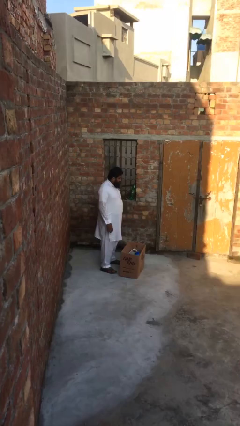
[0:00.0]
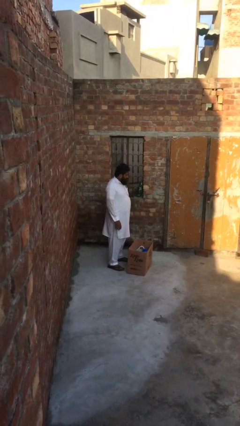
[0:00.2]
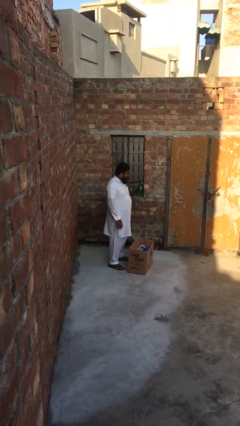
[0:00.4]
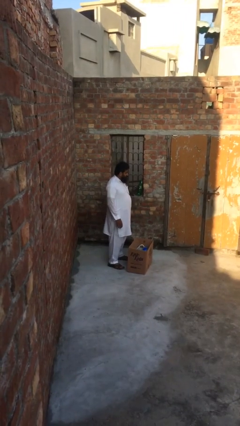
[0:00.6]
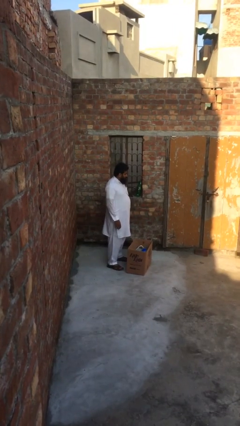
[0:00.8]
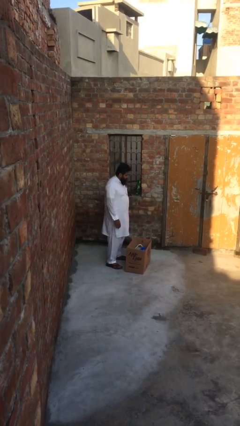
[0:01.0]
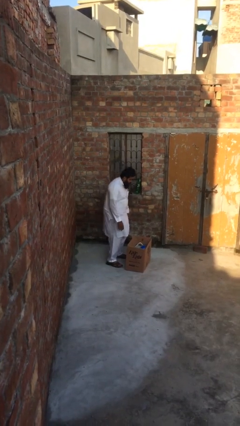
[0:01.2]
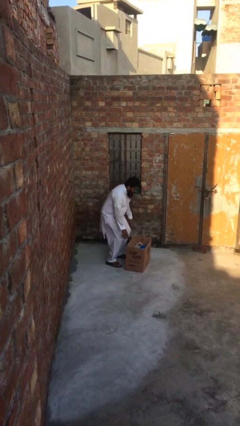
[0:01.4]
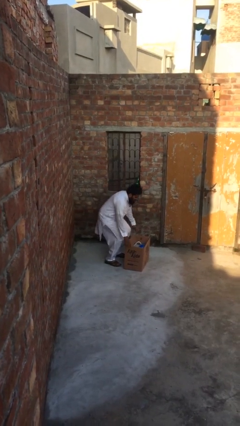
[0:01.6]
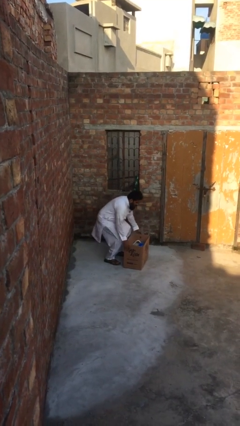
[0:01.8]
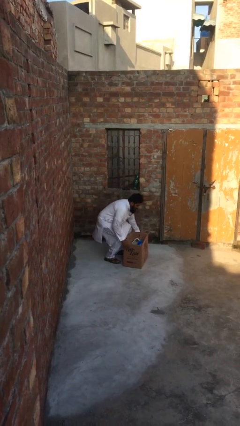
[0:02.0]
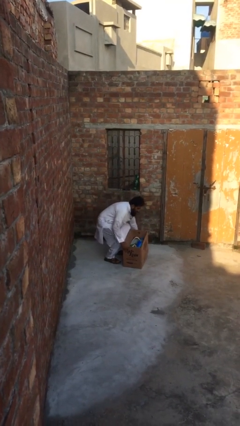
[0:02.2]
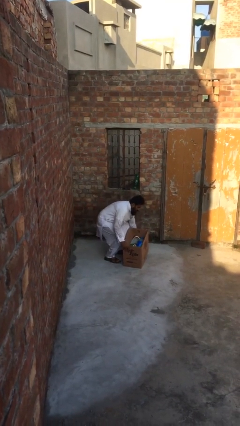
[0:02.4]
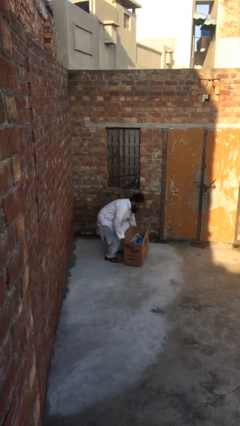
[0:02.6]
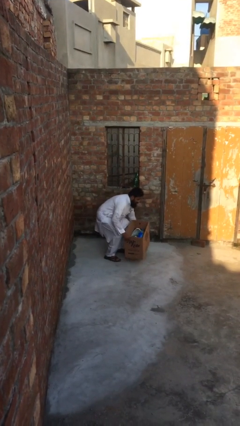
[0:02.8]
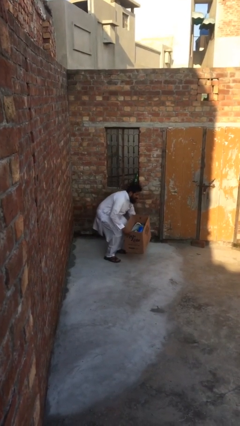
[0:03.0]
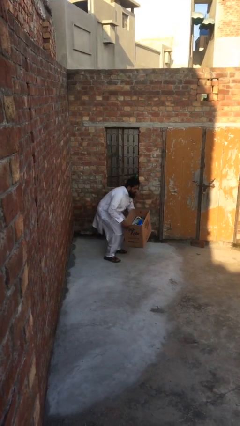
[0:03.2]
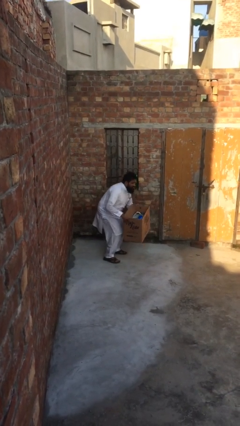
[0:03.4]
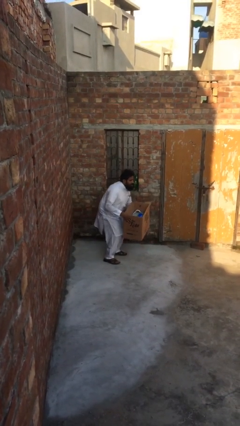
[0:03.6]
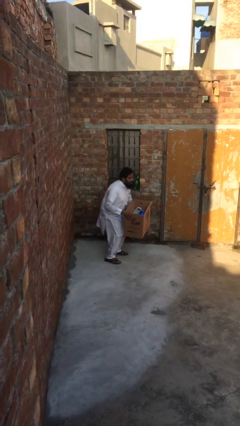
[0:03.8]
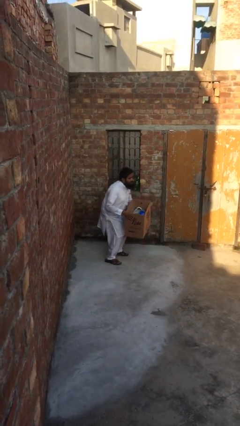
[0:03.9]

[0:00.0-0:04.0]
person picks up object from floor

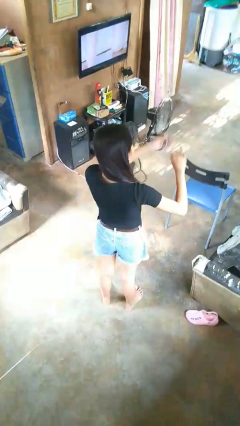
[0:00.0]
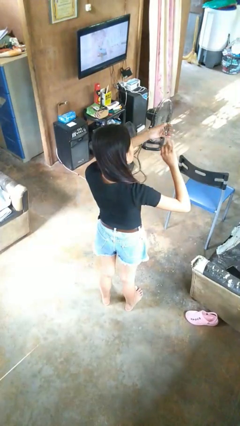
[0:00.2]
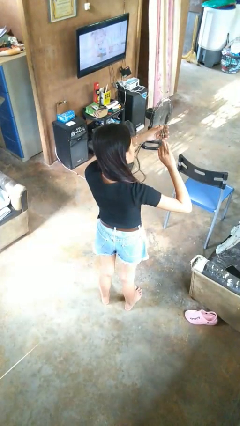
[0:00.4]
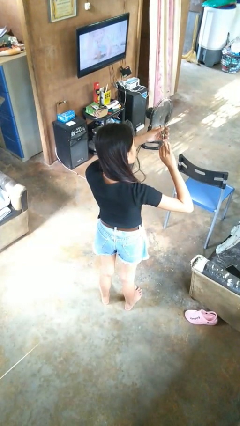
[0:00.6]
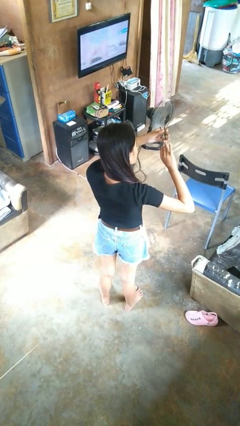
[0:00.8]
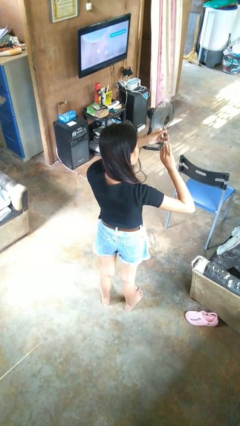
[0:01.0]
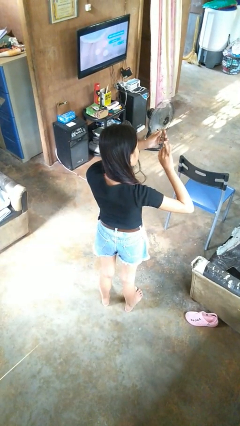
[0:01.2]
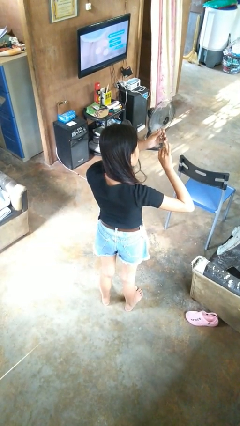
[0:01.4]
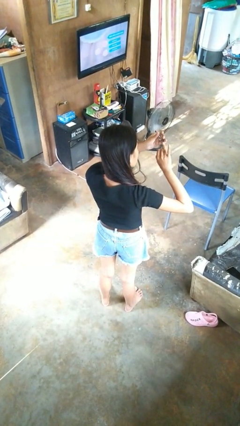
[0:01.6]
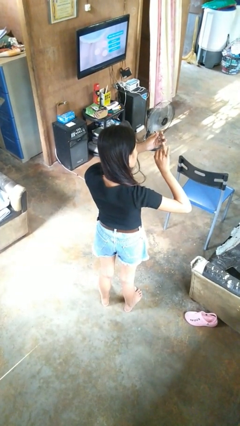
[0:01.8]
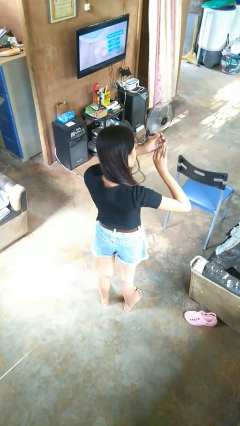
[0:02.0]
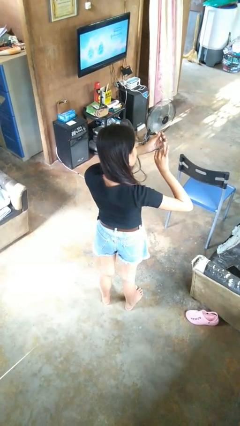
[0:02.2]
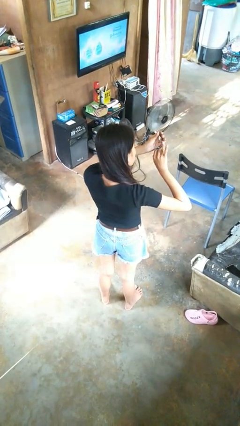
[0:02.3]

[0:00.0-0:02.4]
person clips fingernails

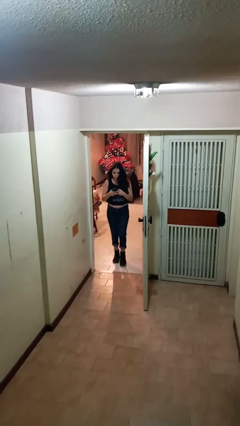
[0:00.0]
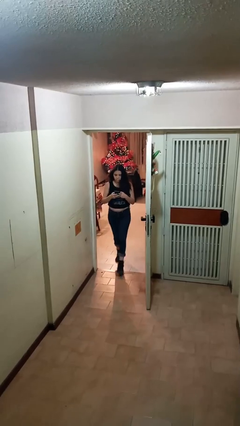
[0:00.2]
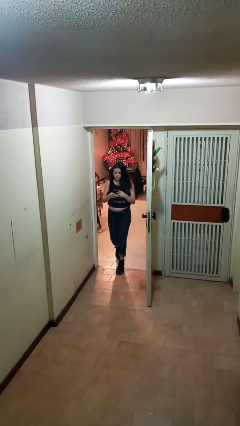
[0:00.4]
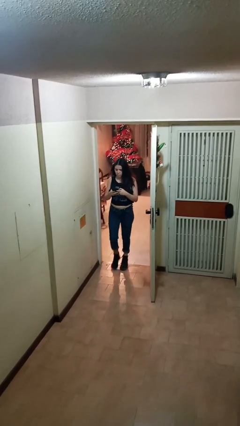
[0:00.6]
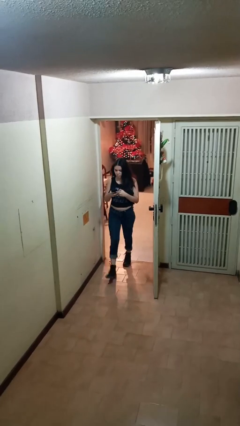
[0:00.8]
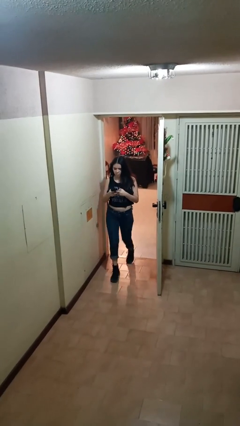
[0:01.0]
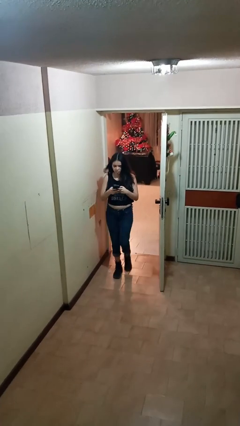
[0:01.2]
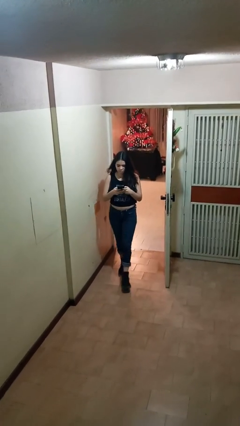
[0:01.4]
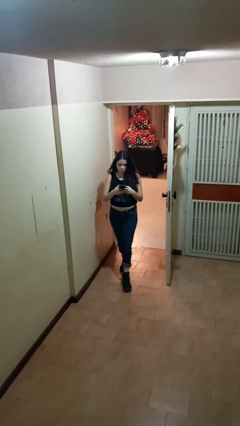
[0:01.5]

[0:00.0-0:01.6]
person enters scene through structure

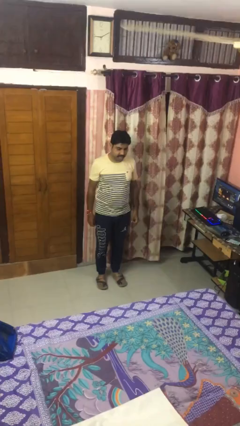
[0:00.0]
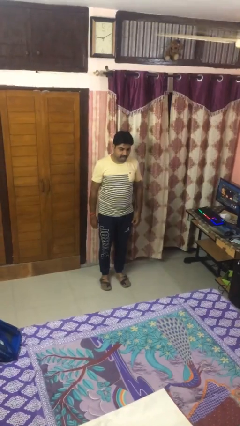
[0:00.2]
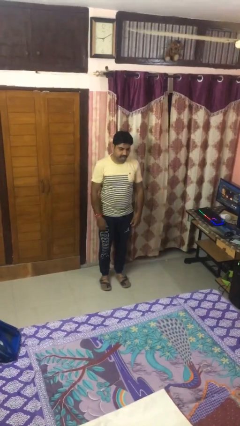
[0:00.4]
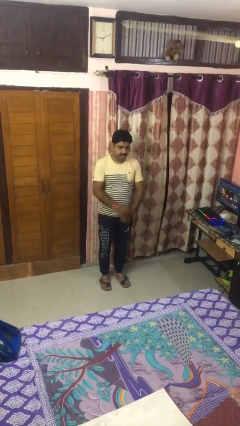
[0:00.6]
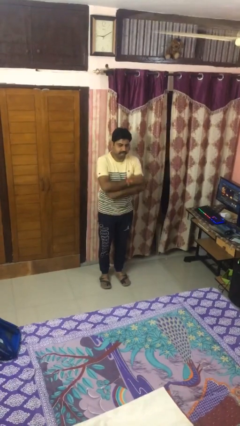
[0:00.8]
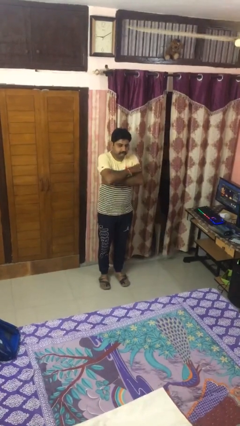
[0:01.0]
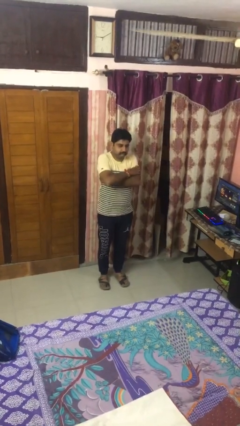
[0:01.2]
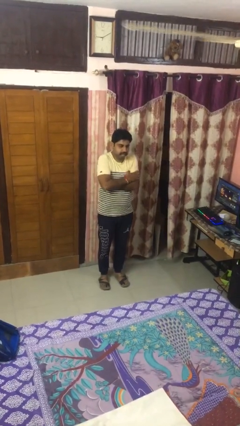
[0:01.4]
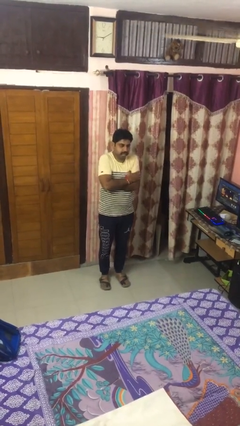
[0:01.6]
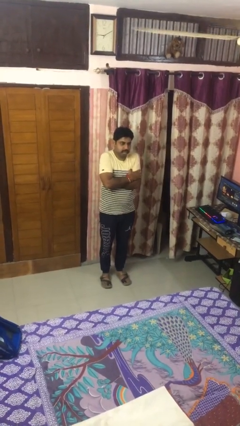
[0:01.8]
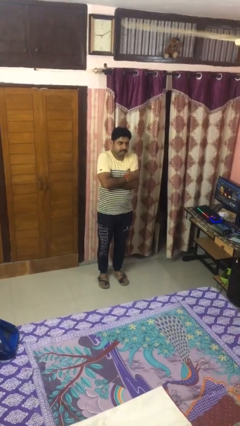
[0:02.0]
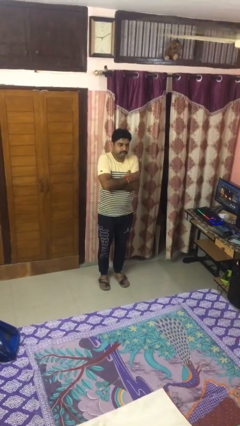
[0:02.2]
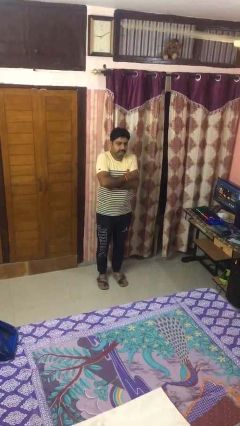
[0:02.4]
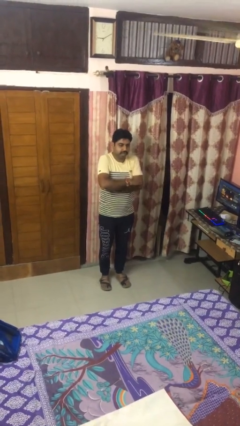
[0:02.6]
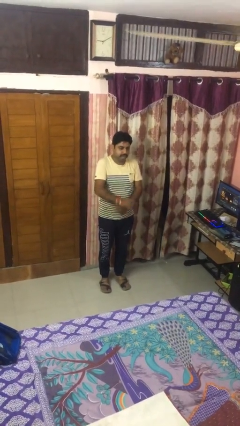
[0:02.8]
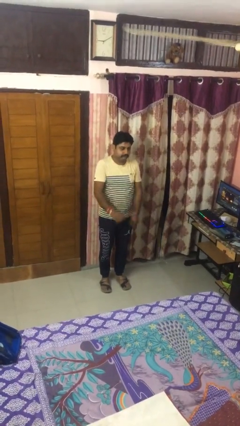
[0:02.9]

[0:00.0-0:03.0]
person crosses arms

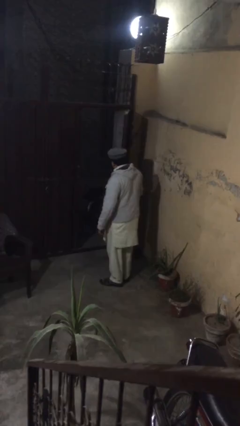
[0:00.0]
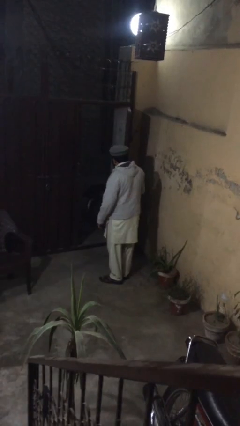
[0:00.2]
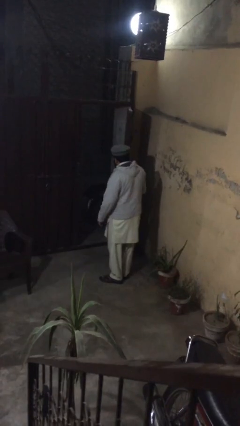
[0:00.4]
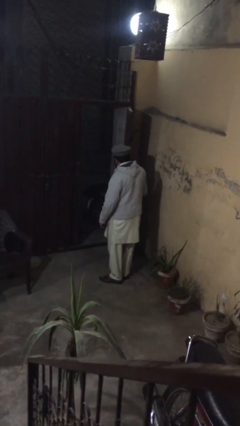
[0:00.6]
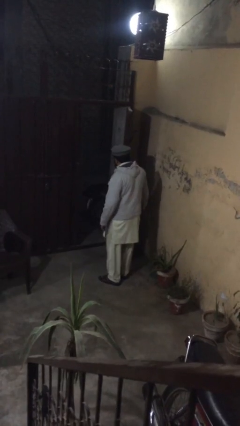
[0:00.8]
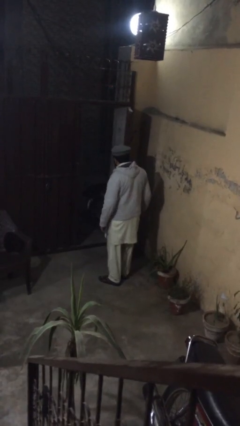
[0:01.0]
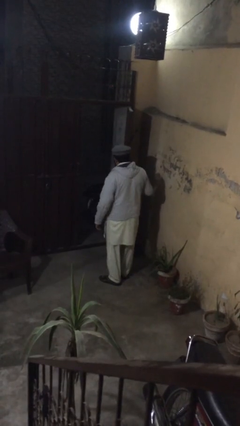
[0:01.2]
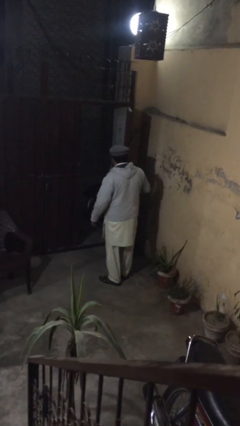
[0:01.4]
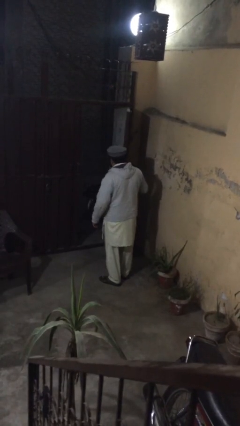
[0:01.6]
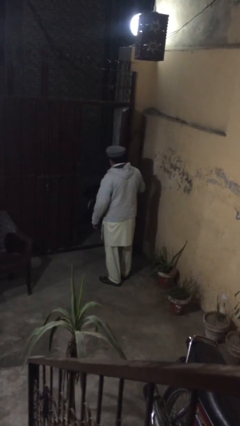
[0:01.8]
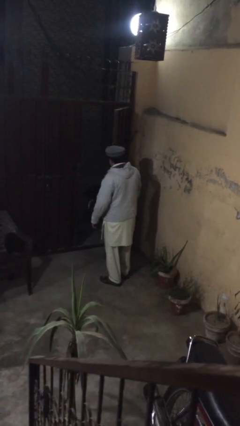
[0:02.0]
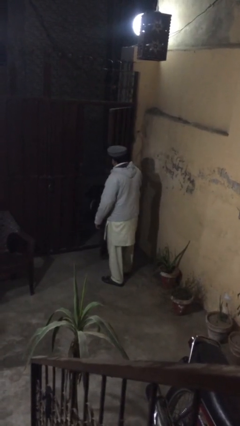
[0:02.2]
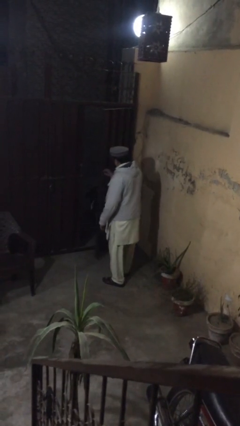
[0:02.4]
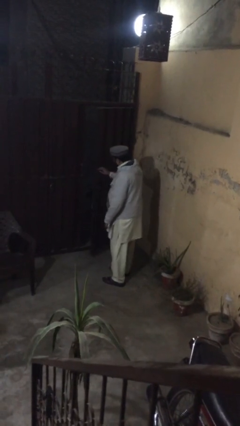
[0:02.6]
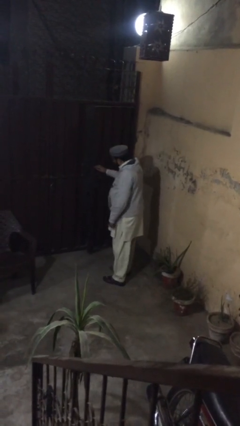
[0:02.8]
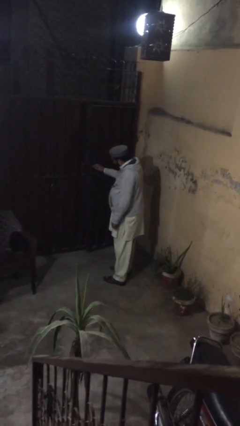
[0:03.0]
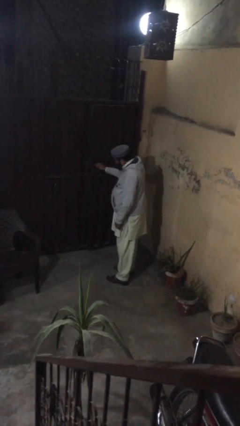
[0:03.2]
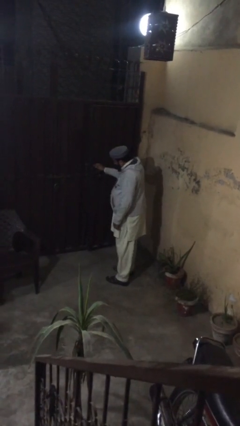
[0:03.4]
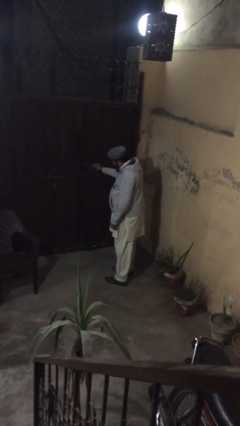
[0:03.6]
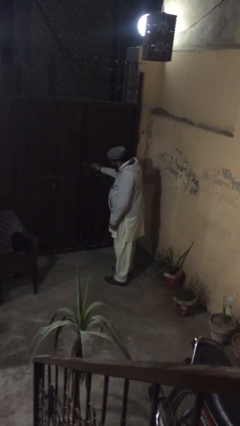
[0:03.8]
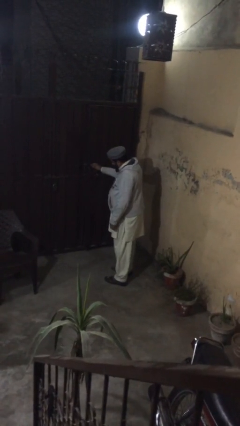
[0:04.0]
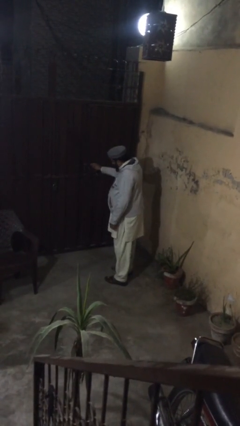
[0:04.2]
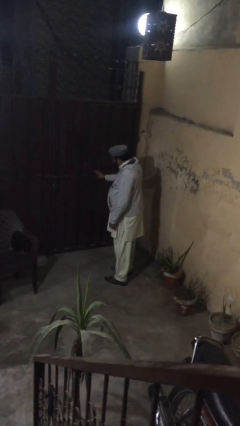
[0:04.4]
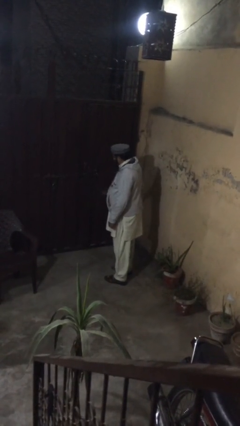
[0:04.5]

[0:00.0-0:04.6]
person closes facility door

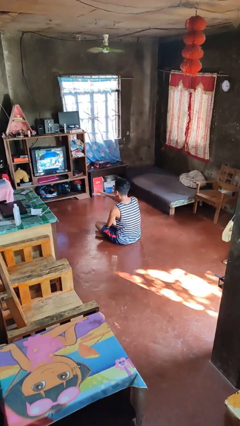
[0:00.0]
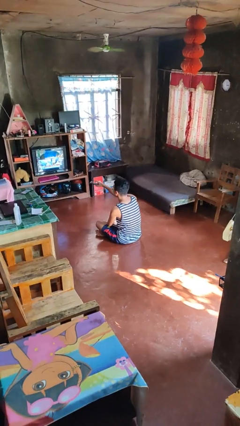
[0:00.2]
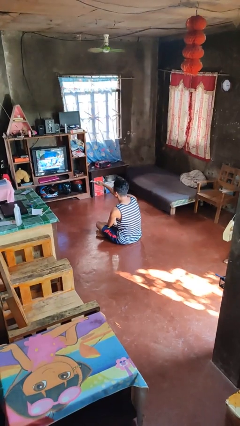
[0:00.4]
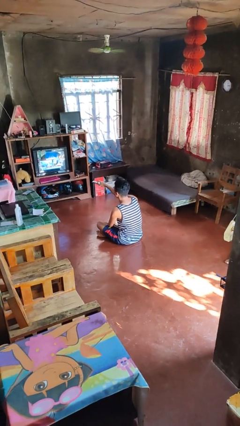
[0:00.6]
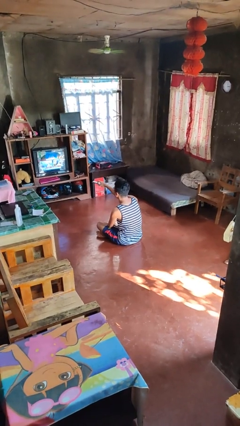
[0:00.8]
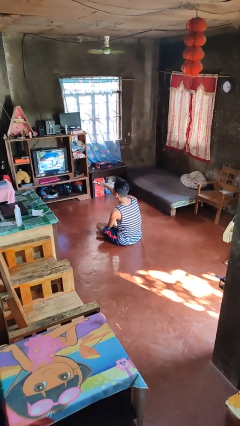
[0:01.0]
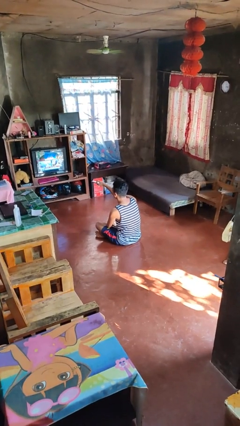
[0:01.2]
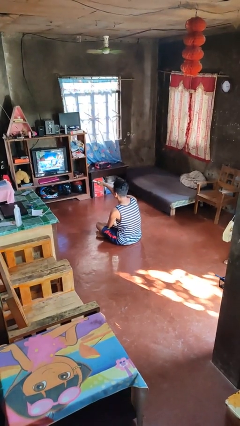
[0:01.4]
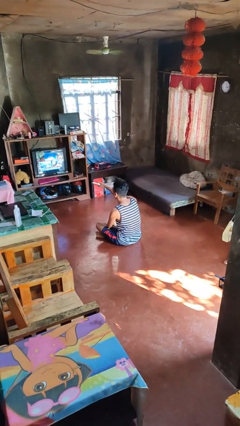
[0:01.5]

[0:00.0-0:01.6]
person uses television remote

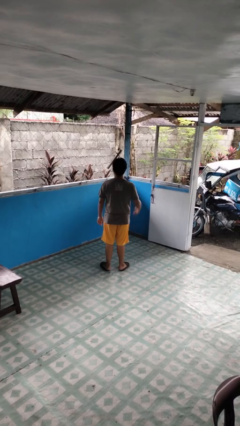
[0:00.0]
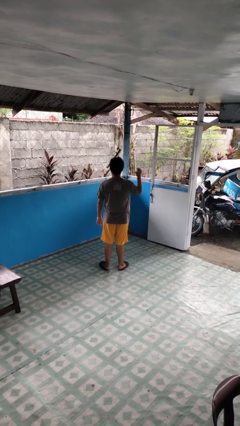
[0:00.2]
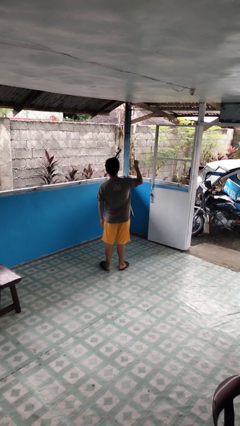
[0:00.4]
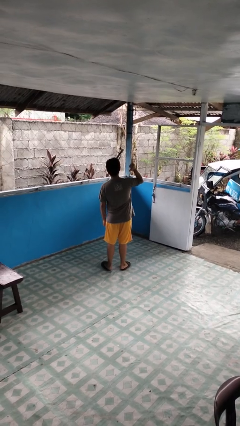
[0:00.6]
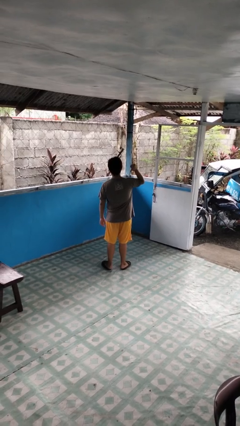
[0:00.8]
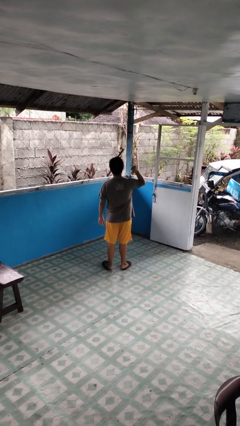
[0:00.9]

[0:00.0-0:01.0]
person gestures behind me
